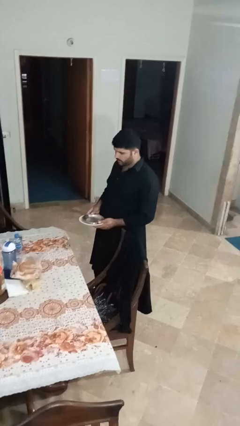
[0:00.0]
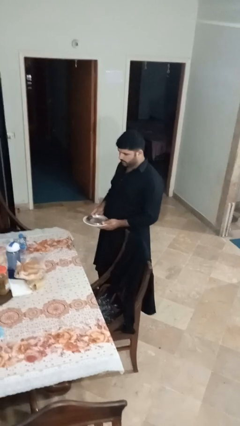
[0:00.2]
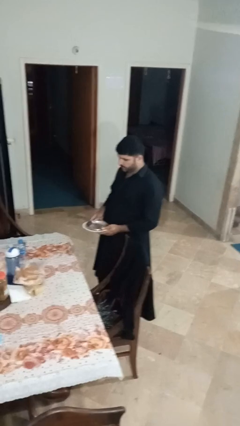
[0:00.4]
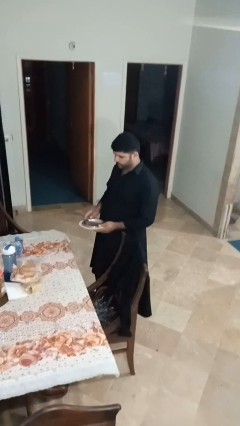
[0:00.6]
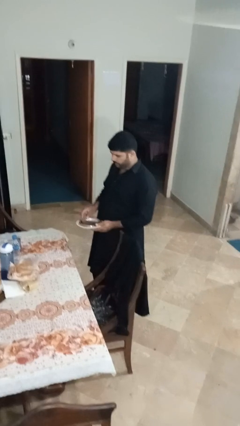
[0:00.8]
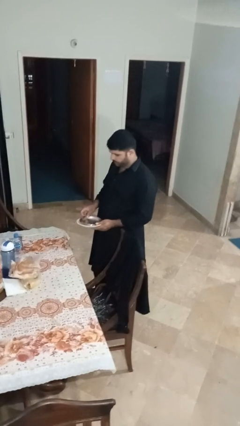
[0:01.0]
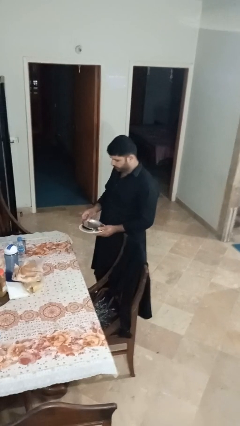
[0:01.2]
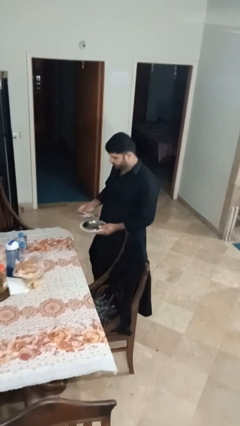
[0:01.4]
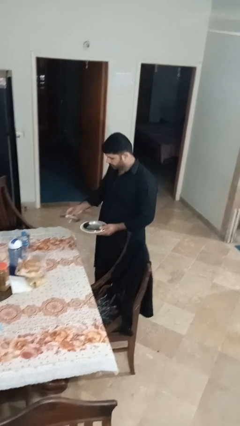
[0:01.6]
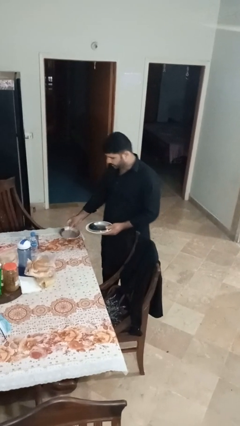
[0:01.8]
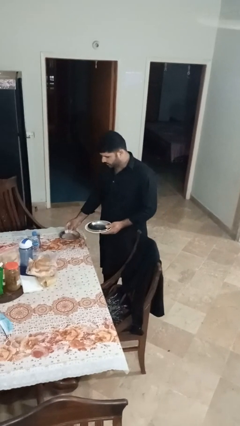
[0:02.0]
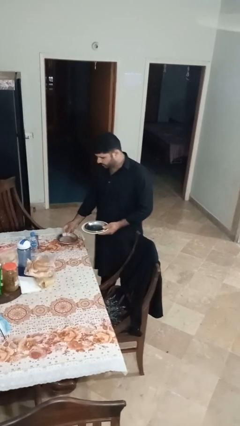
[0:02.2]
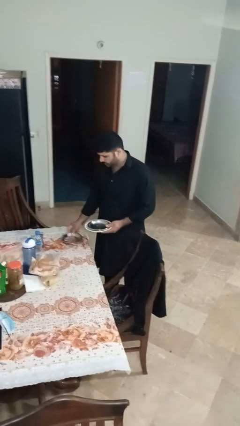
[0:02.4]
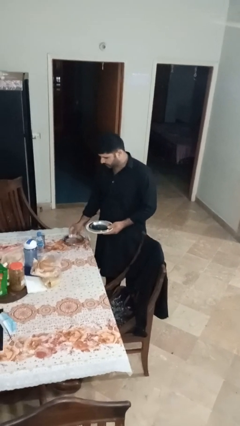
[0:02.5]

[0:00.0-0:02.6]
person sets table

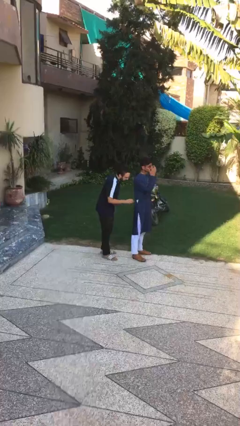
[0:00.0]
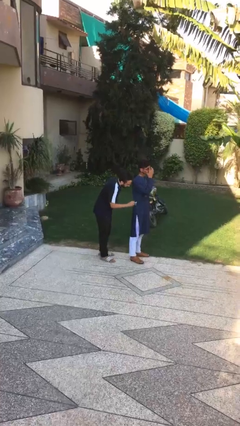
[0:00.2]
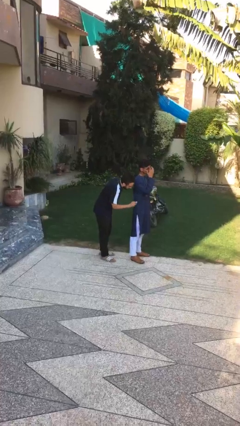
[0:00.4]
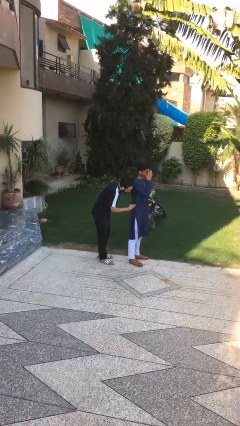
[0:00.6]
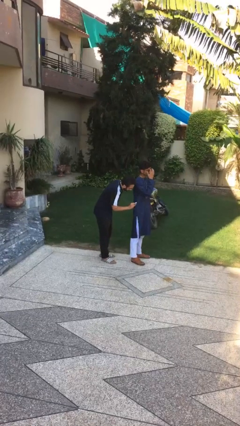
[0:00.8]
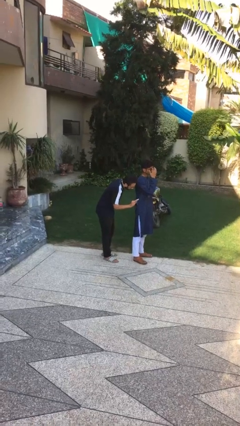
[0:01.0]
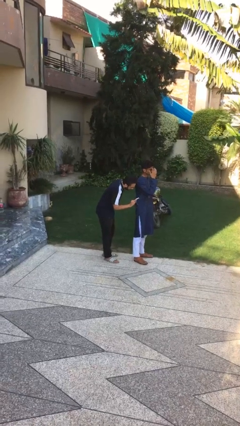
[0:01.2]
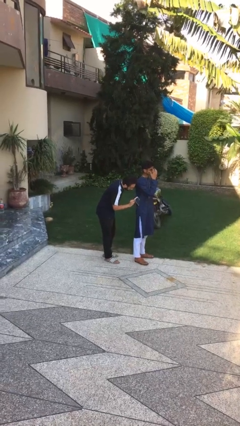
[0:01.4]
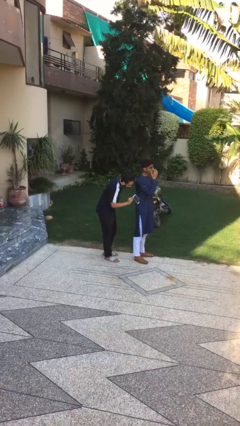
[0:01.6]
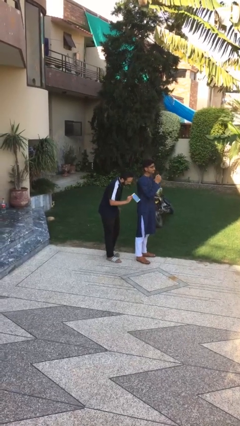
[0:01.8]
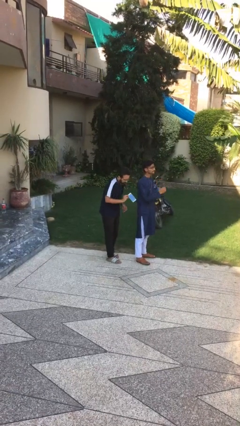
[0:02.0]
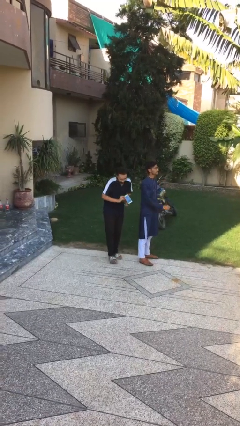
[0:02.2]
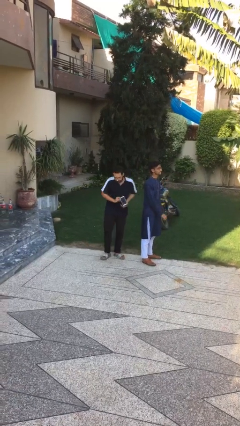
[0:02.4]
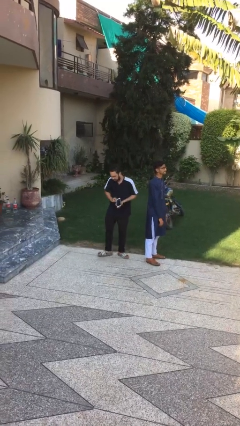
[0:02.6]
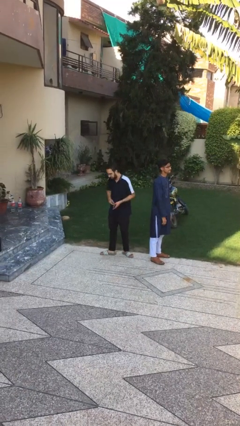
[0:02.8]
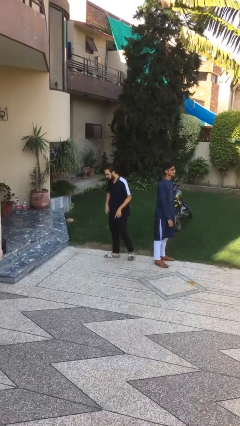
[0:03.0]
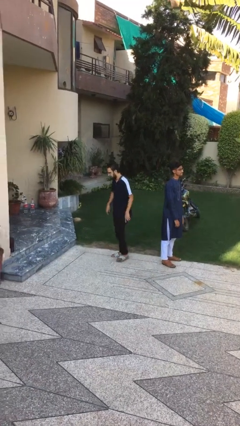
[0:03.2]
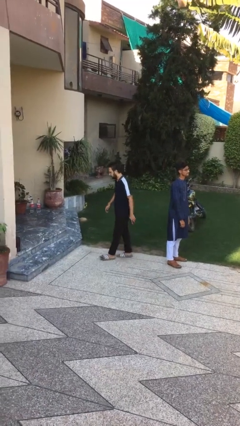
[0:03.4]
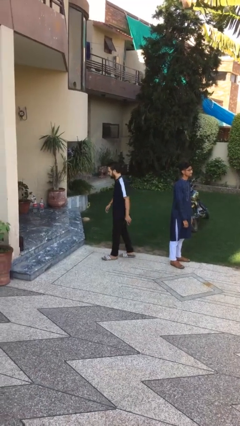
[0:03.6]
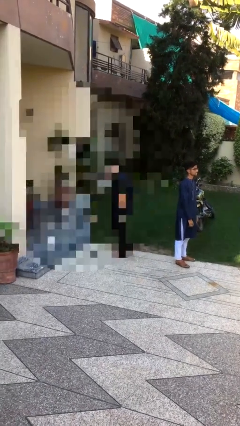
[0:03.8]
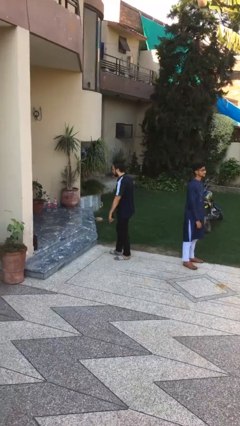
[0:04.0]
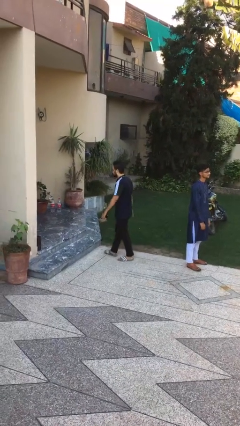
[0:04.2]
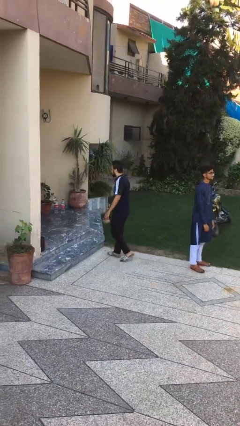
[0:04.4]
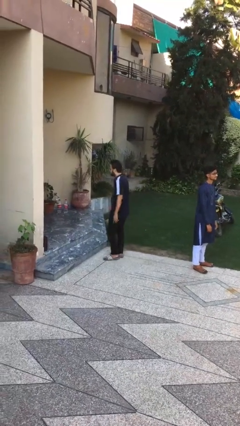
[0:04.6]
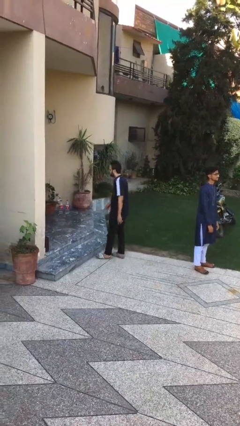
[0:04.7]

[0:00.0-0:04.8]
person steals object from person

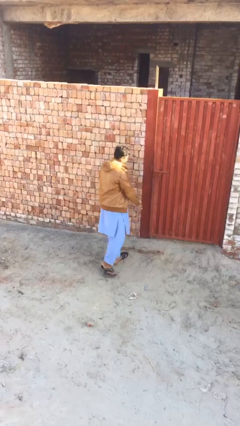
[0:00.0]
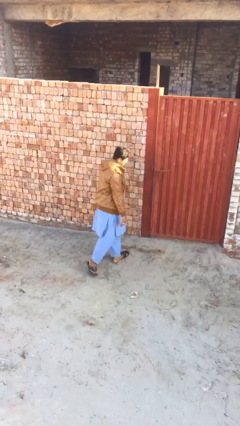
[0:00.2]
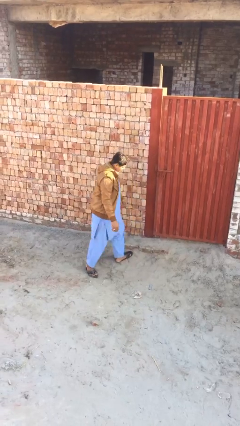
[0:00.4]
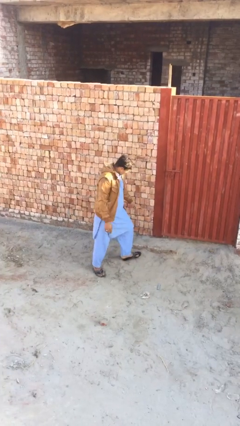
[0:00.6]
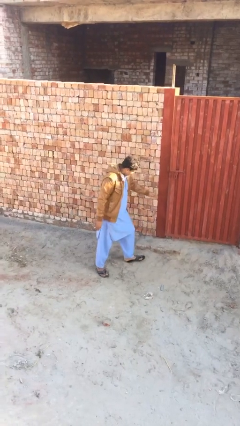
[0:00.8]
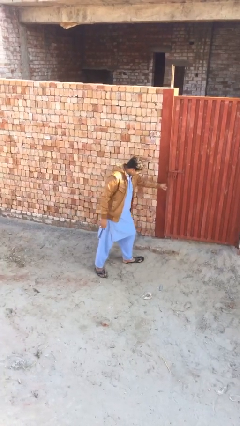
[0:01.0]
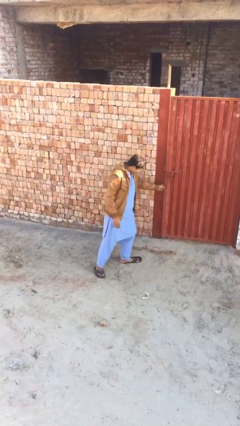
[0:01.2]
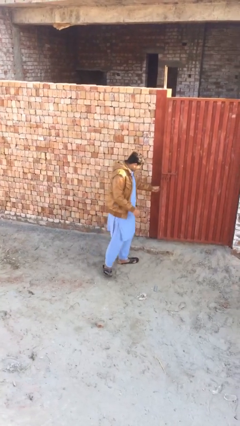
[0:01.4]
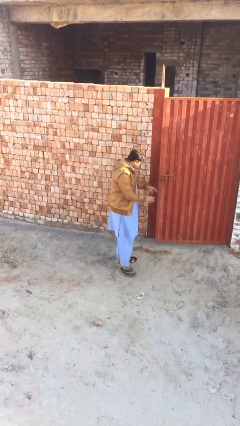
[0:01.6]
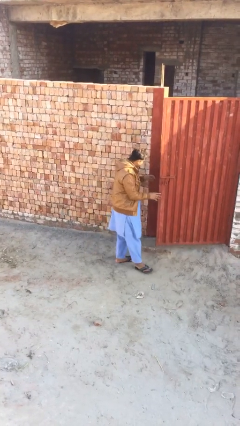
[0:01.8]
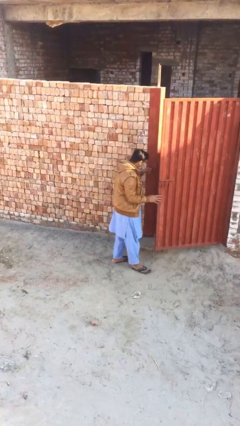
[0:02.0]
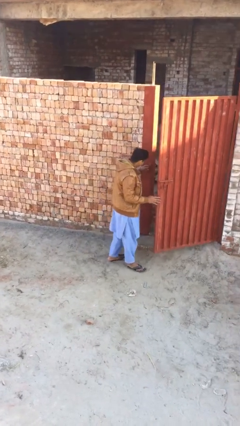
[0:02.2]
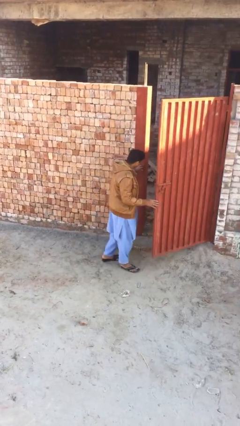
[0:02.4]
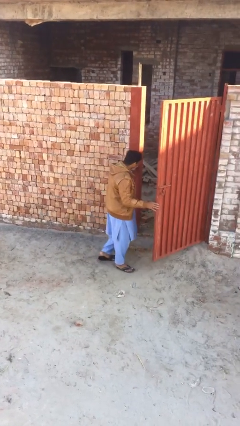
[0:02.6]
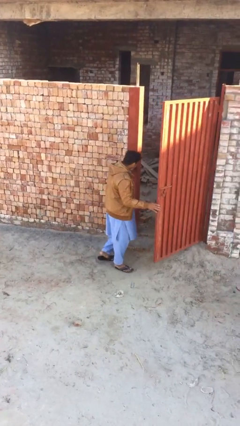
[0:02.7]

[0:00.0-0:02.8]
person opens facility door

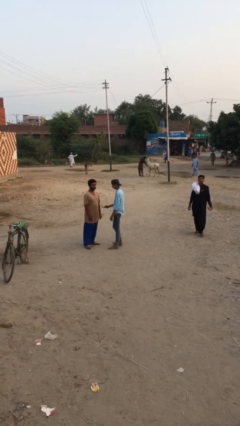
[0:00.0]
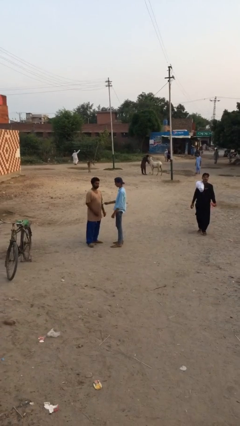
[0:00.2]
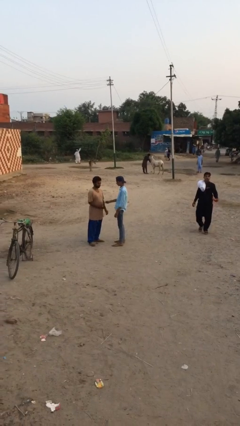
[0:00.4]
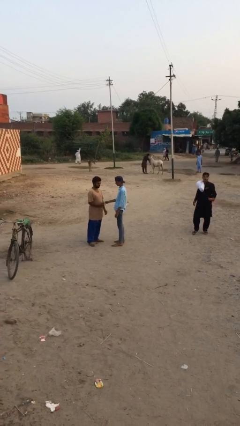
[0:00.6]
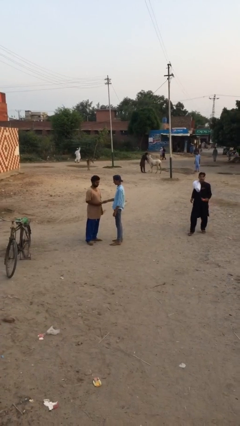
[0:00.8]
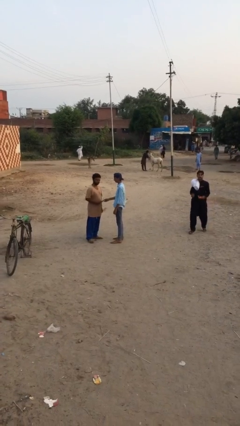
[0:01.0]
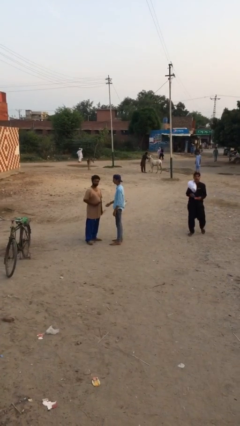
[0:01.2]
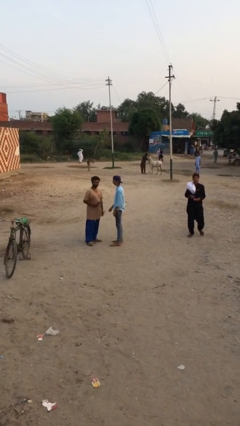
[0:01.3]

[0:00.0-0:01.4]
person transfers object to person

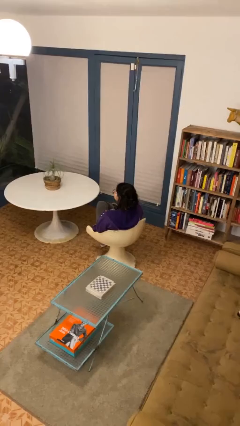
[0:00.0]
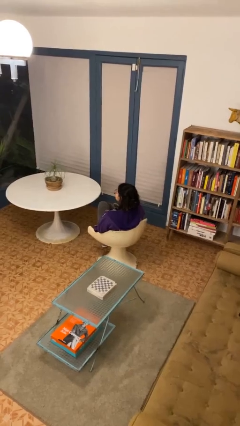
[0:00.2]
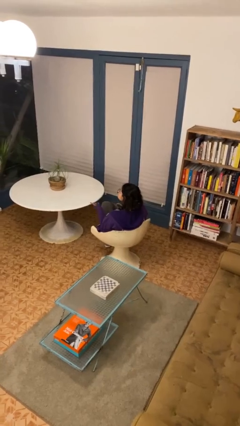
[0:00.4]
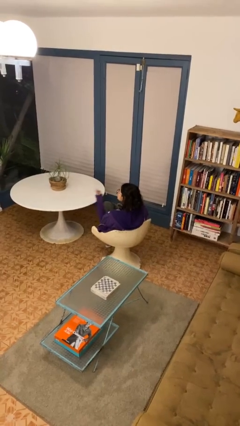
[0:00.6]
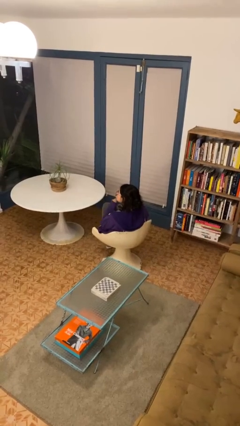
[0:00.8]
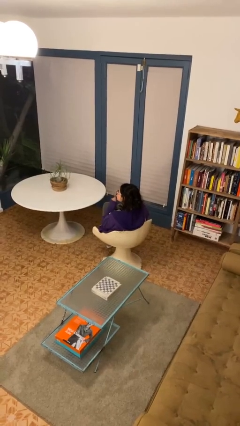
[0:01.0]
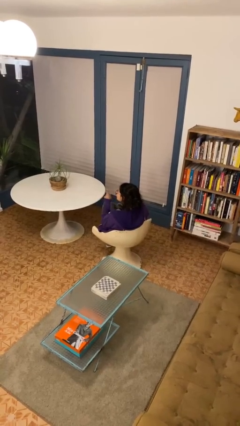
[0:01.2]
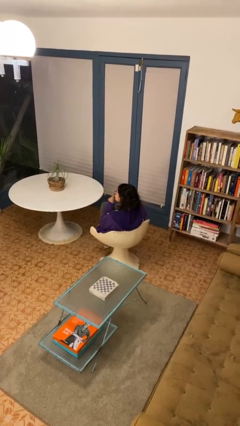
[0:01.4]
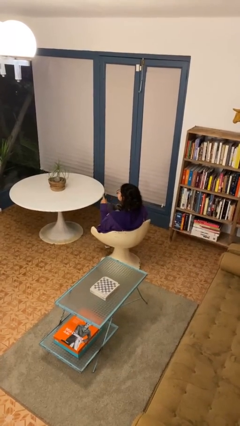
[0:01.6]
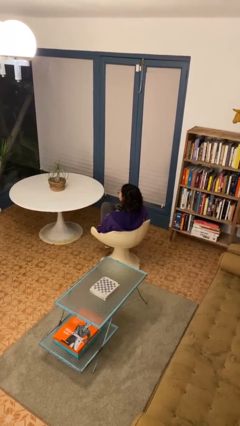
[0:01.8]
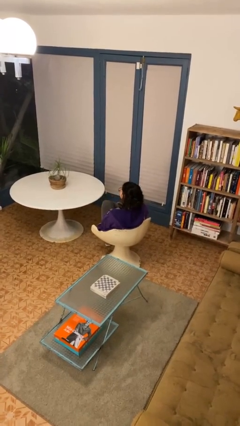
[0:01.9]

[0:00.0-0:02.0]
person gestures be quiet

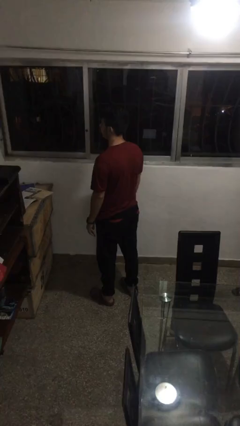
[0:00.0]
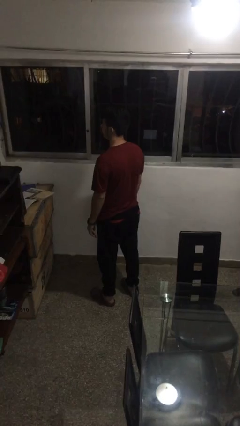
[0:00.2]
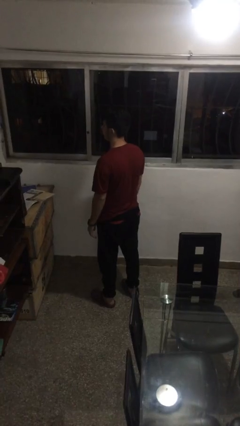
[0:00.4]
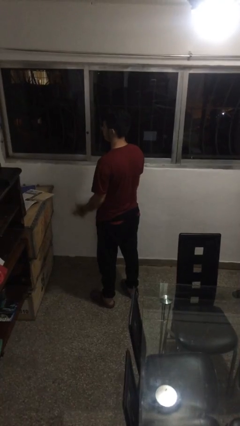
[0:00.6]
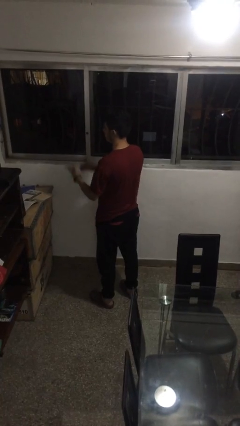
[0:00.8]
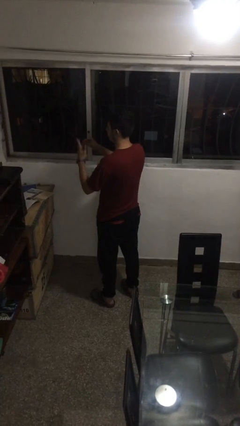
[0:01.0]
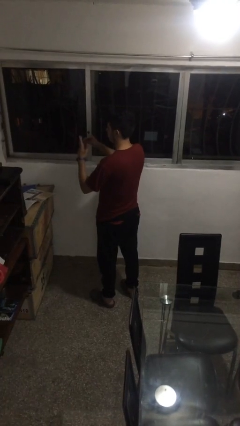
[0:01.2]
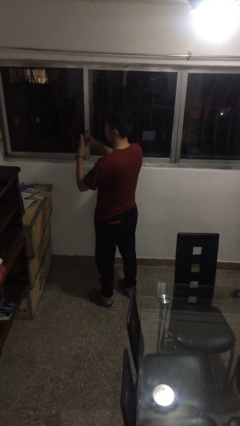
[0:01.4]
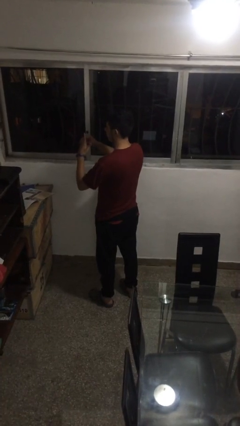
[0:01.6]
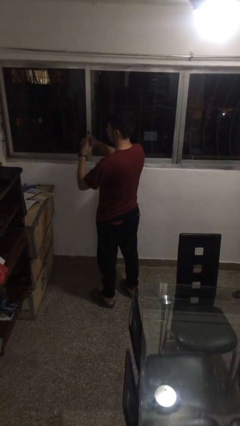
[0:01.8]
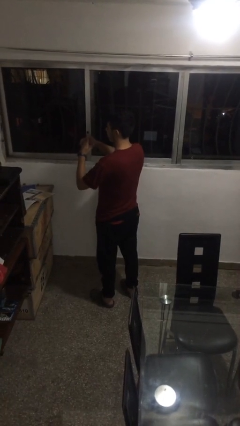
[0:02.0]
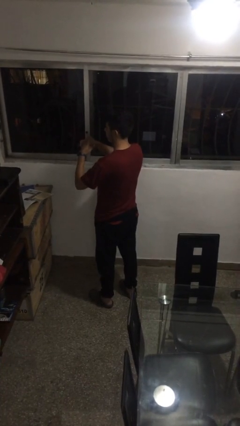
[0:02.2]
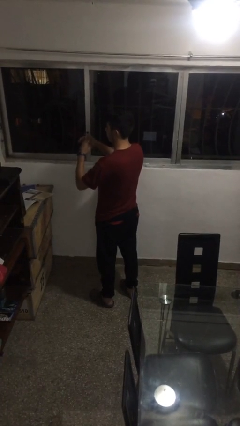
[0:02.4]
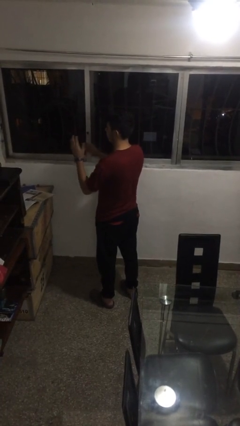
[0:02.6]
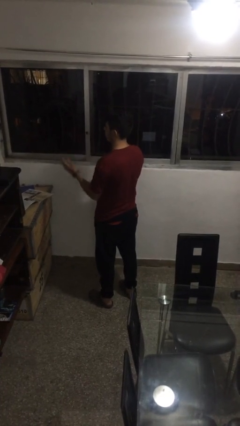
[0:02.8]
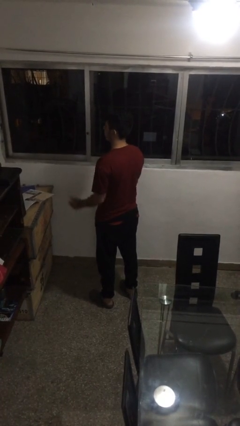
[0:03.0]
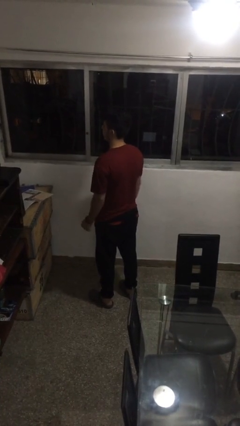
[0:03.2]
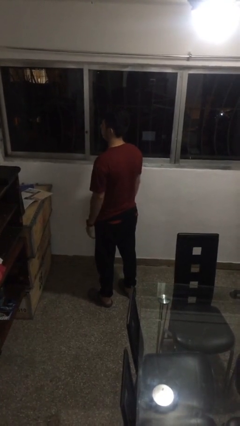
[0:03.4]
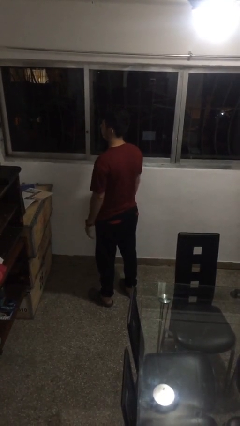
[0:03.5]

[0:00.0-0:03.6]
person puts on ring
